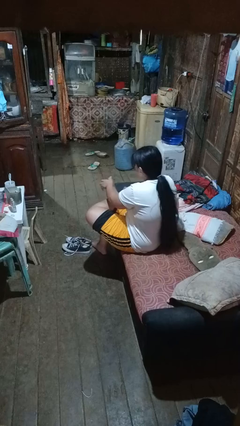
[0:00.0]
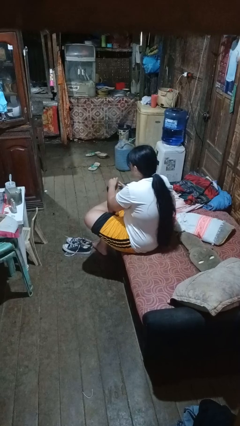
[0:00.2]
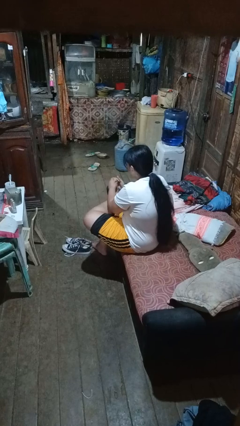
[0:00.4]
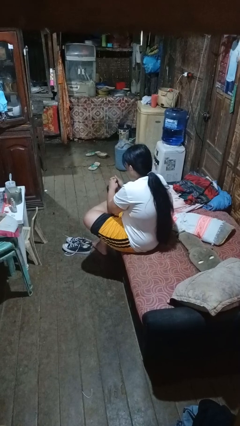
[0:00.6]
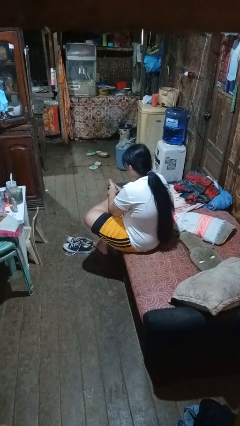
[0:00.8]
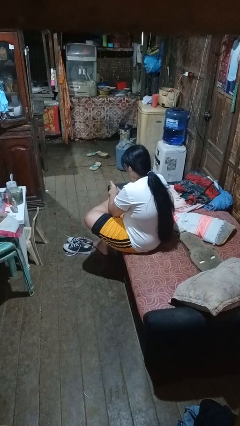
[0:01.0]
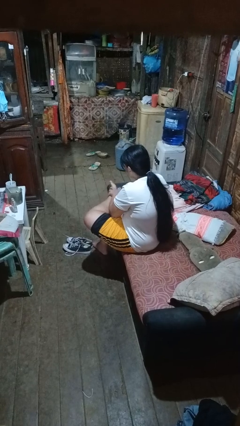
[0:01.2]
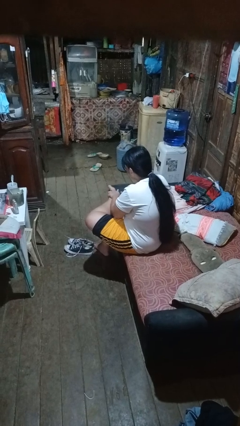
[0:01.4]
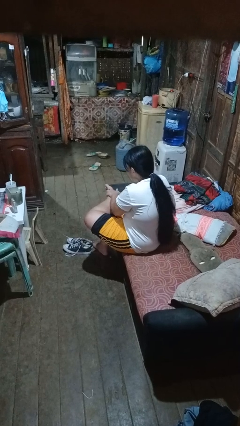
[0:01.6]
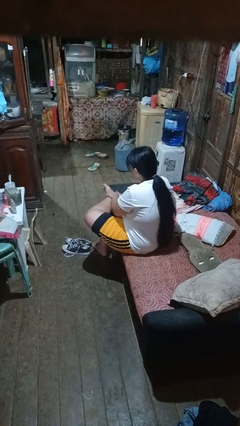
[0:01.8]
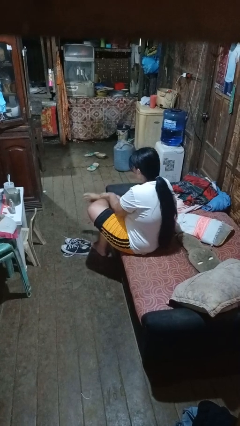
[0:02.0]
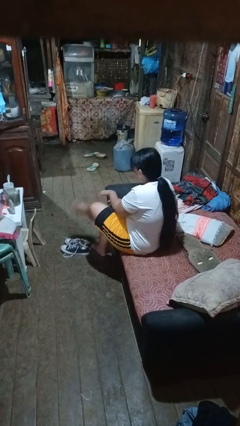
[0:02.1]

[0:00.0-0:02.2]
person rubs foot

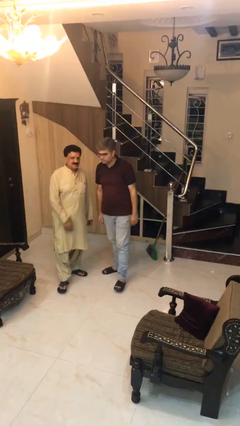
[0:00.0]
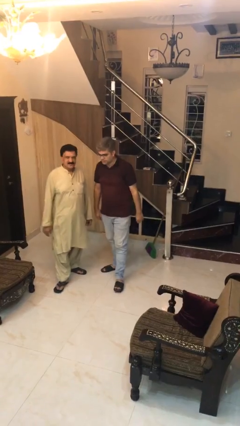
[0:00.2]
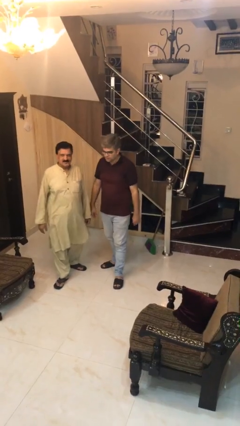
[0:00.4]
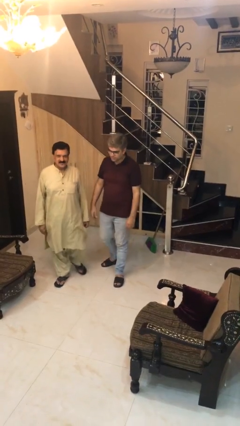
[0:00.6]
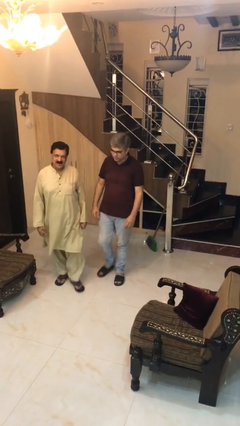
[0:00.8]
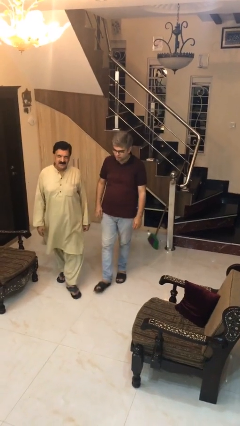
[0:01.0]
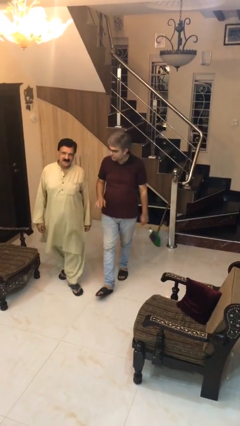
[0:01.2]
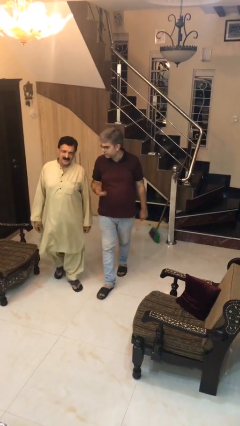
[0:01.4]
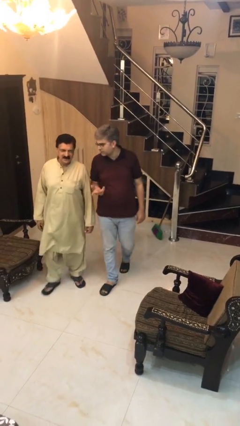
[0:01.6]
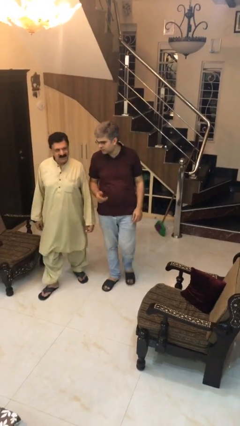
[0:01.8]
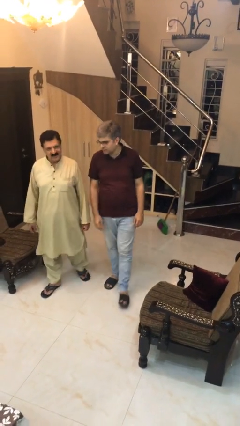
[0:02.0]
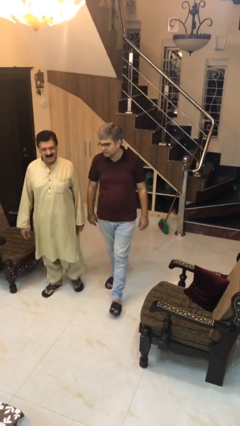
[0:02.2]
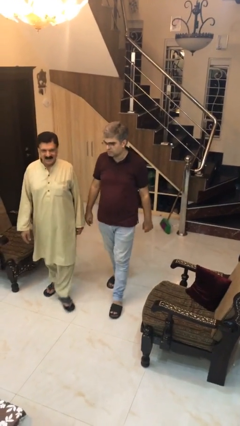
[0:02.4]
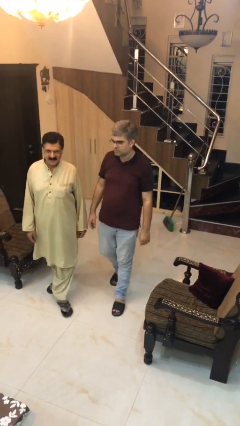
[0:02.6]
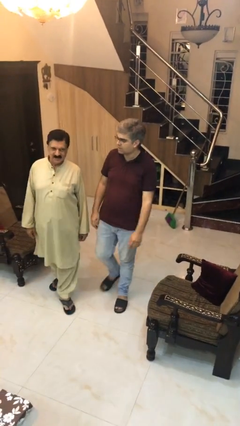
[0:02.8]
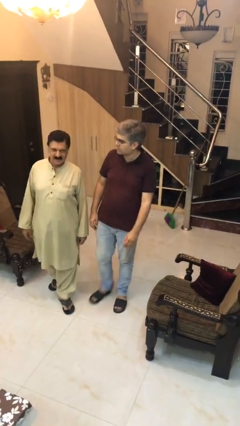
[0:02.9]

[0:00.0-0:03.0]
person talks to person

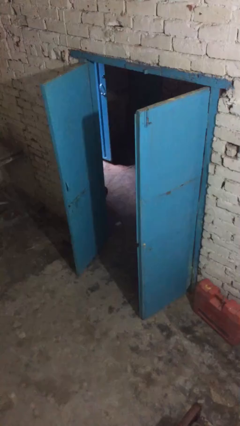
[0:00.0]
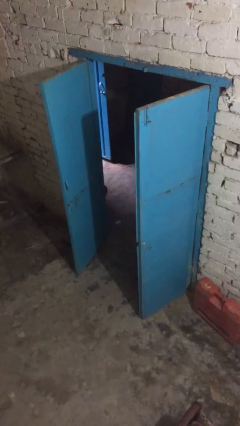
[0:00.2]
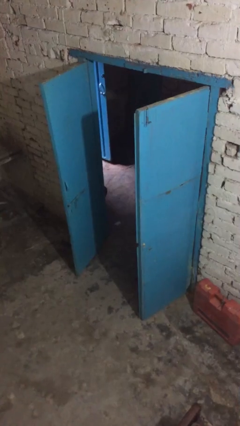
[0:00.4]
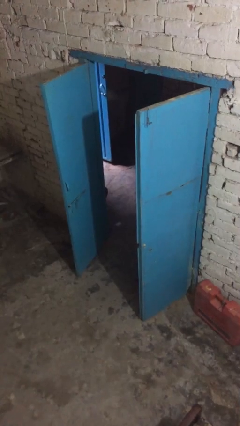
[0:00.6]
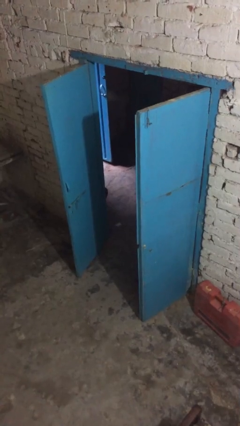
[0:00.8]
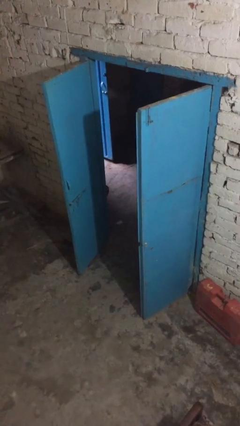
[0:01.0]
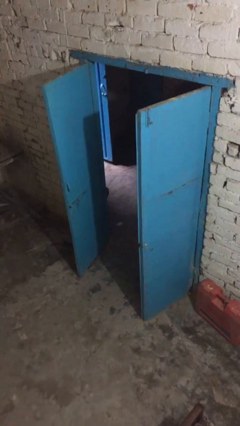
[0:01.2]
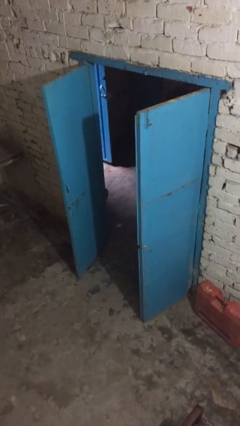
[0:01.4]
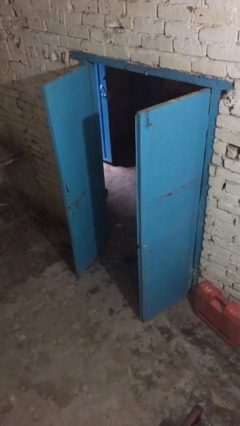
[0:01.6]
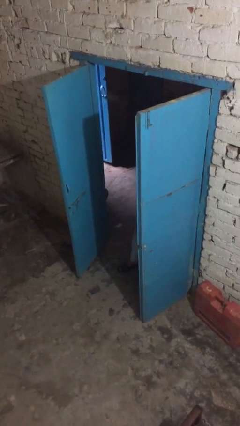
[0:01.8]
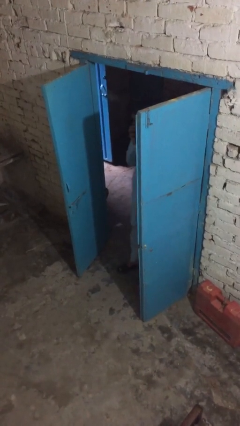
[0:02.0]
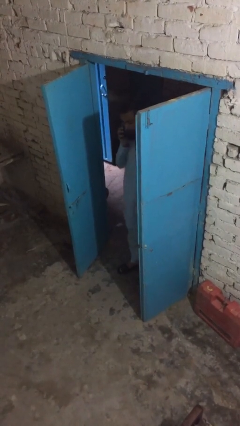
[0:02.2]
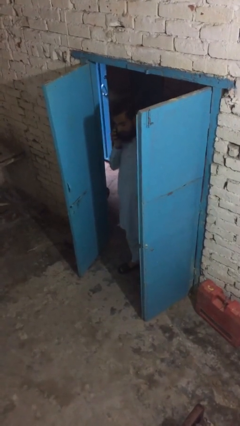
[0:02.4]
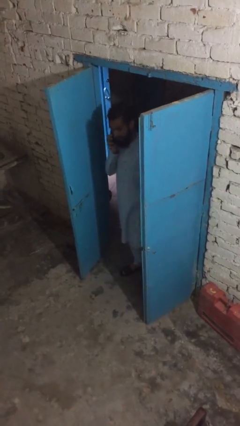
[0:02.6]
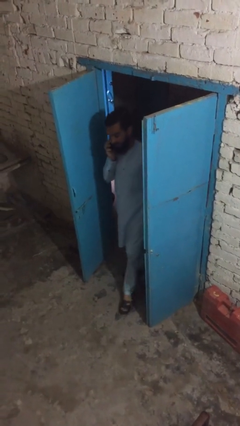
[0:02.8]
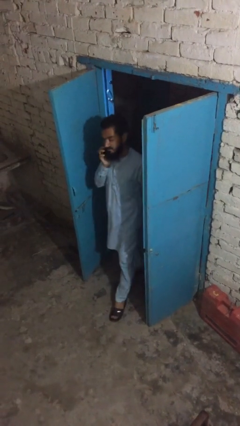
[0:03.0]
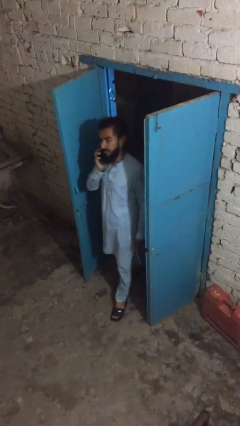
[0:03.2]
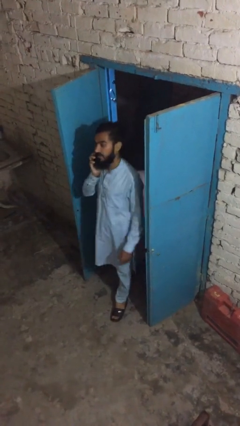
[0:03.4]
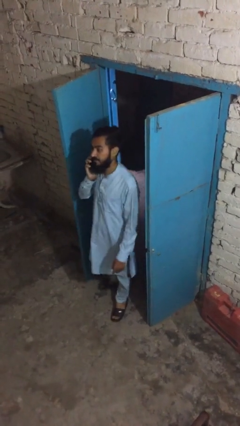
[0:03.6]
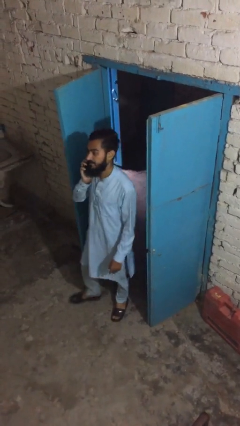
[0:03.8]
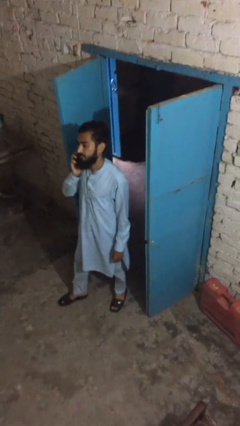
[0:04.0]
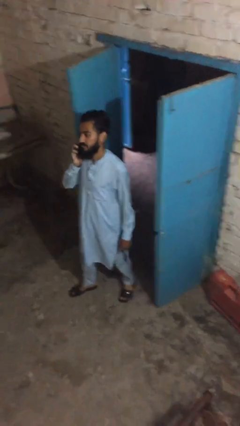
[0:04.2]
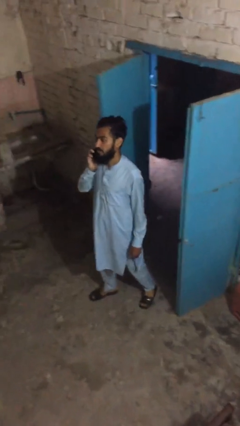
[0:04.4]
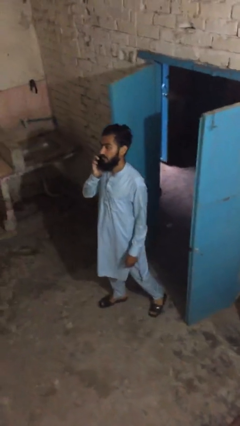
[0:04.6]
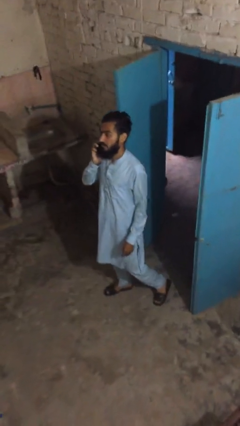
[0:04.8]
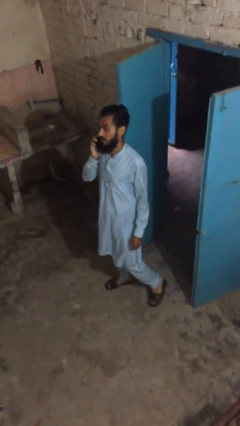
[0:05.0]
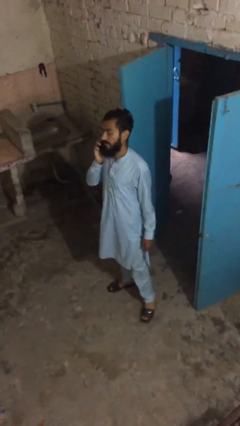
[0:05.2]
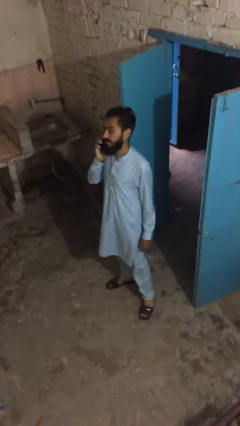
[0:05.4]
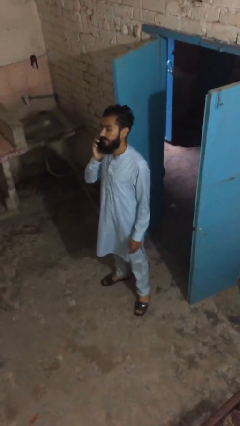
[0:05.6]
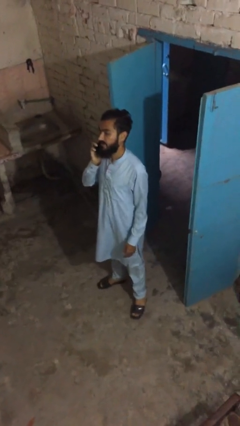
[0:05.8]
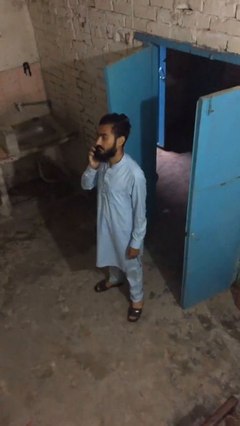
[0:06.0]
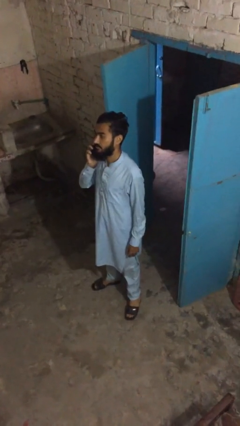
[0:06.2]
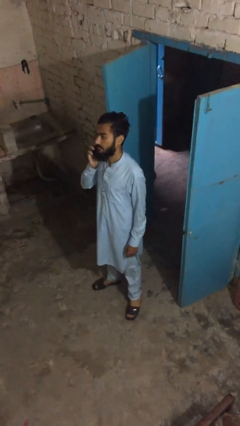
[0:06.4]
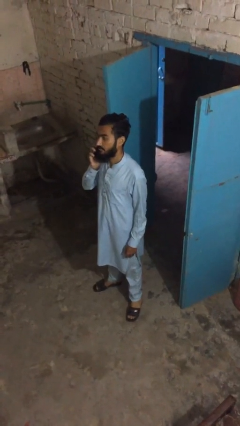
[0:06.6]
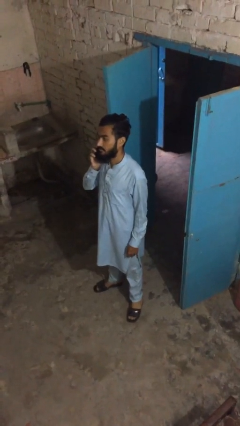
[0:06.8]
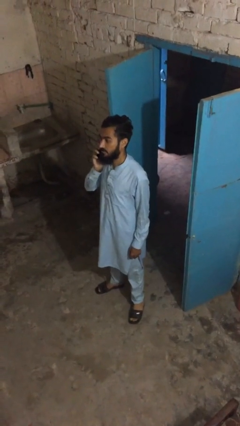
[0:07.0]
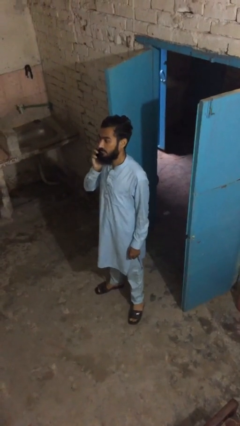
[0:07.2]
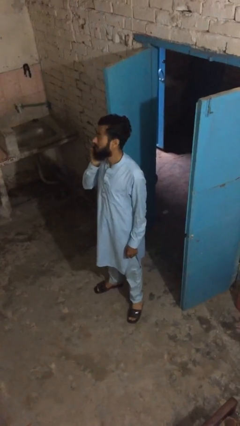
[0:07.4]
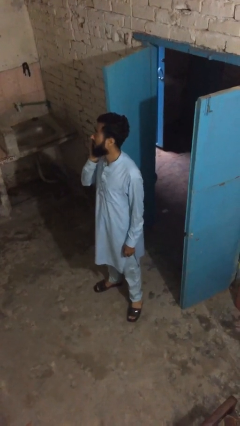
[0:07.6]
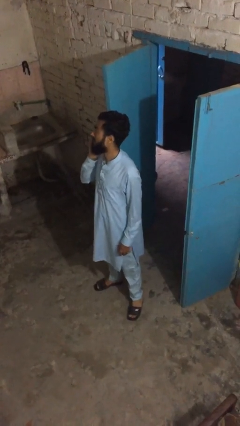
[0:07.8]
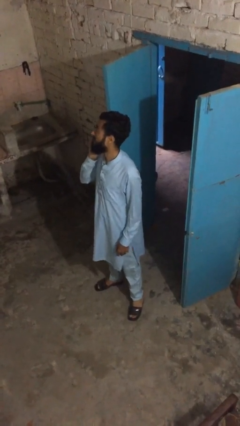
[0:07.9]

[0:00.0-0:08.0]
person enters scene through structure

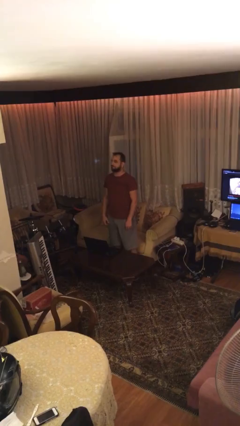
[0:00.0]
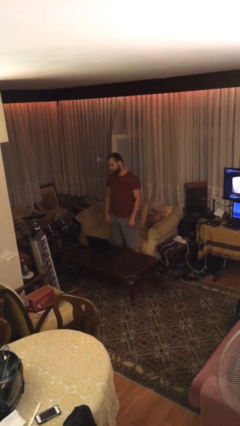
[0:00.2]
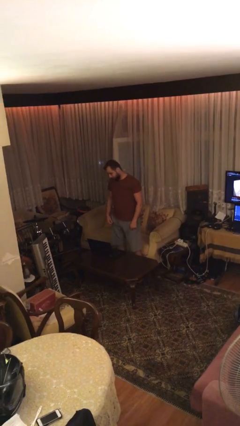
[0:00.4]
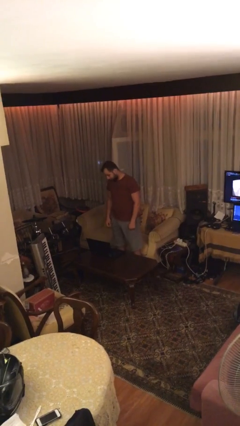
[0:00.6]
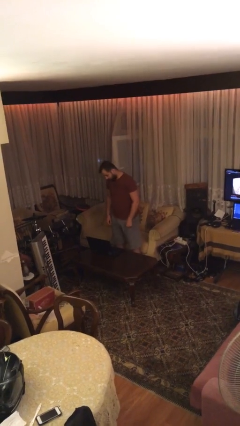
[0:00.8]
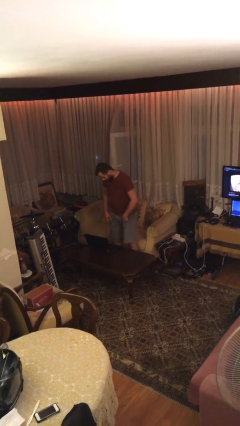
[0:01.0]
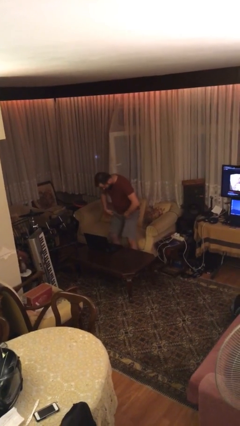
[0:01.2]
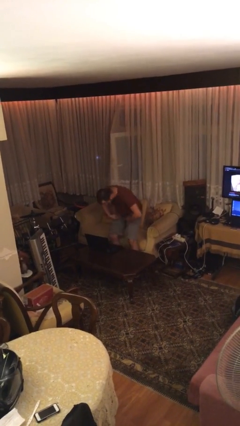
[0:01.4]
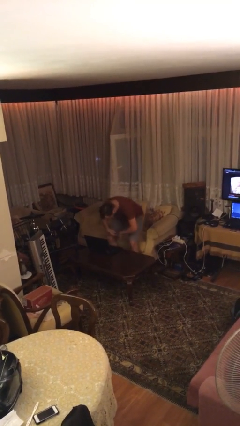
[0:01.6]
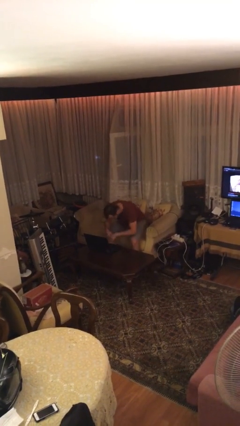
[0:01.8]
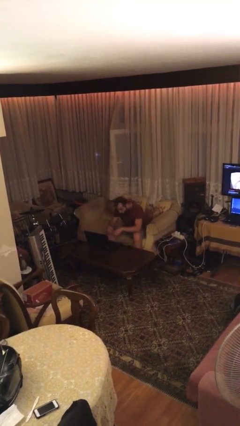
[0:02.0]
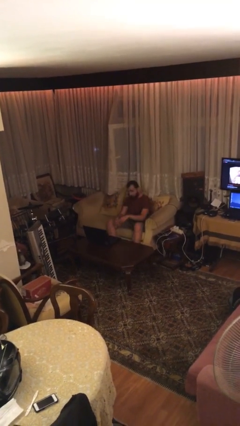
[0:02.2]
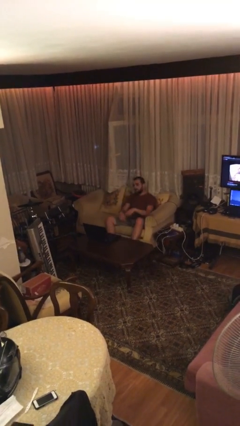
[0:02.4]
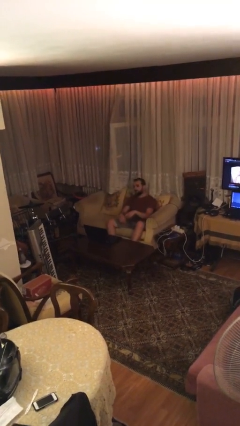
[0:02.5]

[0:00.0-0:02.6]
person sits down

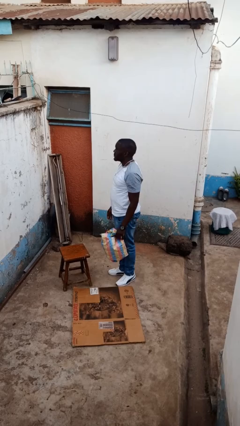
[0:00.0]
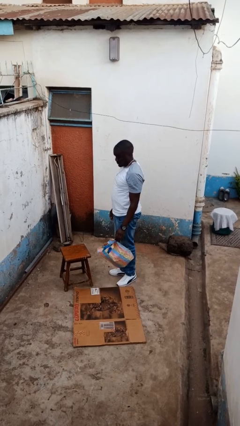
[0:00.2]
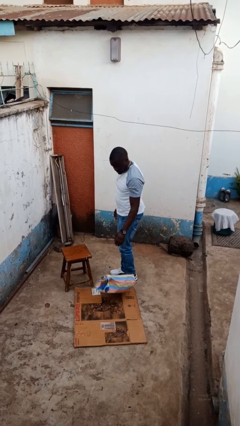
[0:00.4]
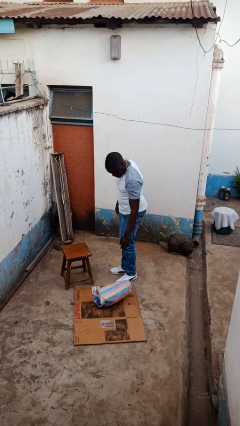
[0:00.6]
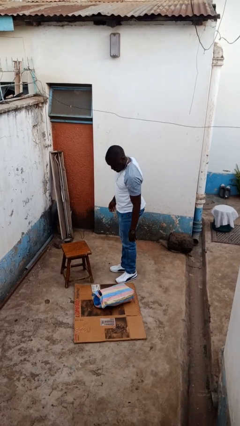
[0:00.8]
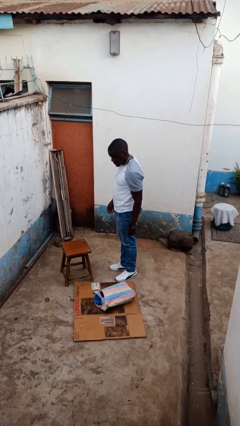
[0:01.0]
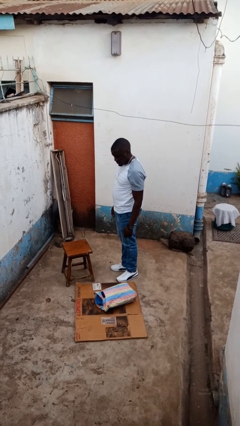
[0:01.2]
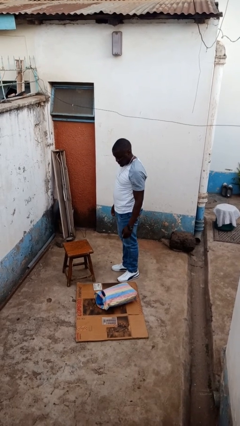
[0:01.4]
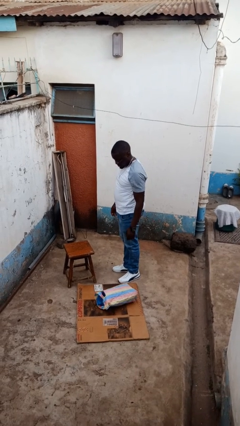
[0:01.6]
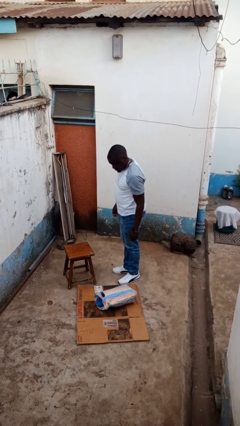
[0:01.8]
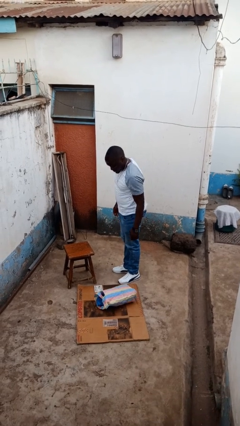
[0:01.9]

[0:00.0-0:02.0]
person drops object
